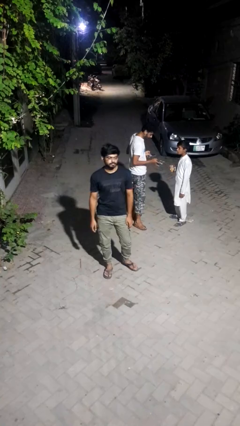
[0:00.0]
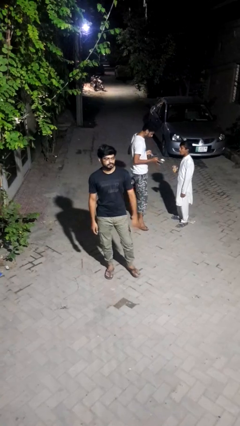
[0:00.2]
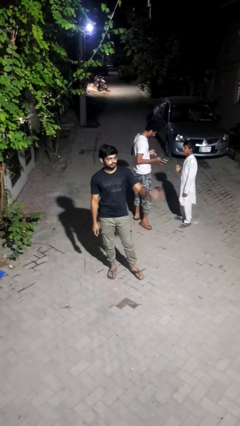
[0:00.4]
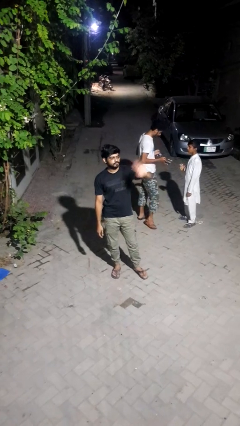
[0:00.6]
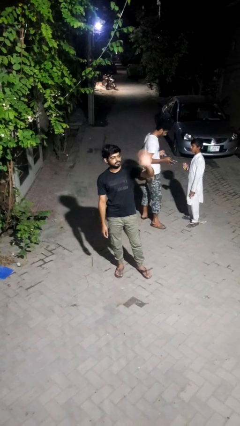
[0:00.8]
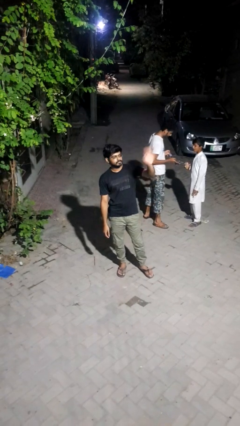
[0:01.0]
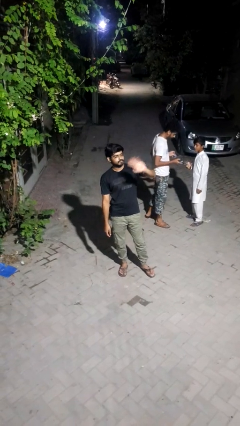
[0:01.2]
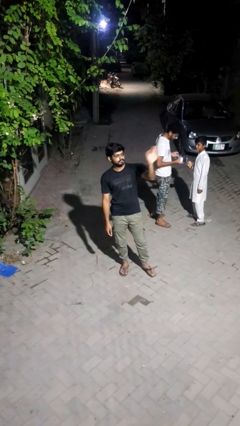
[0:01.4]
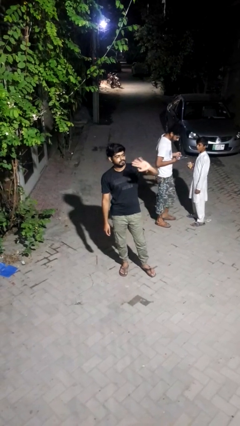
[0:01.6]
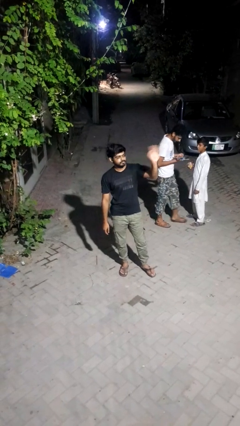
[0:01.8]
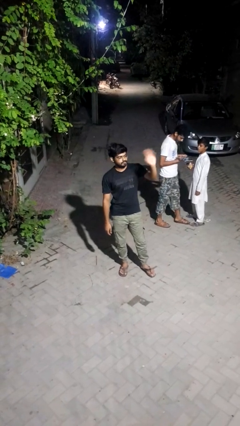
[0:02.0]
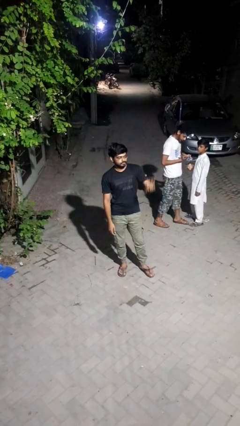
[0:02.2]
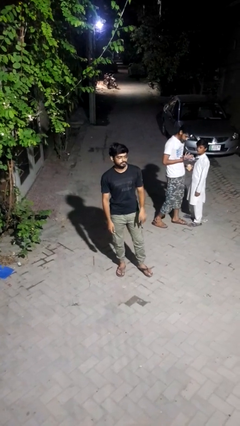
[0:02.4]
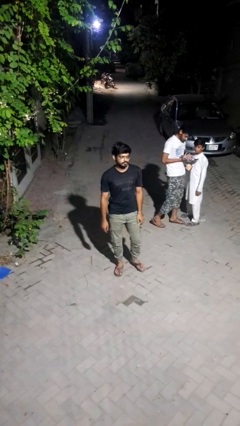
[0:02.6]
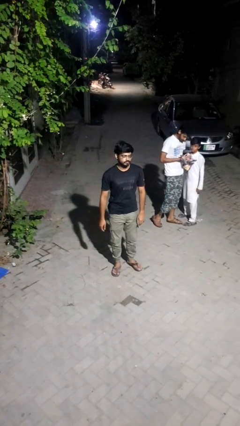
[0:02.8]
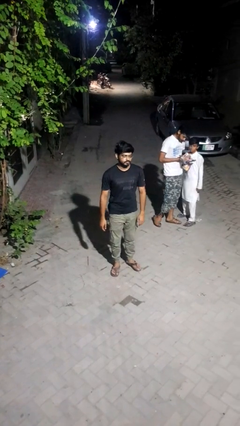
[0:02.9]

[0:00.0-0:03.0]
person waves at person

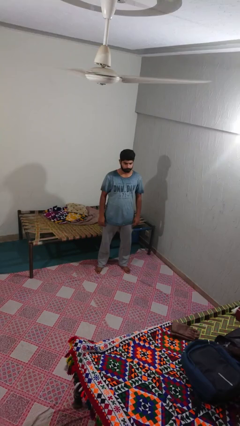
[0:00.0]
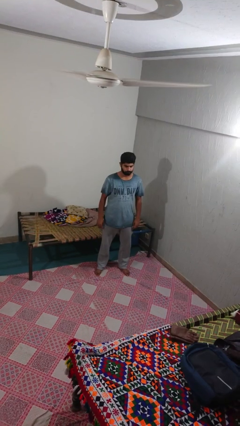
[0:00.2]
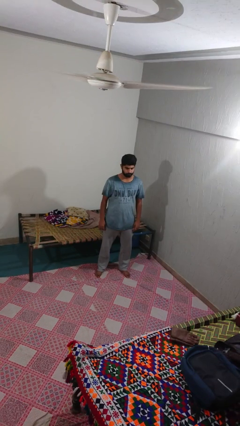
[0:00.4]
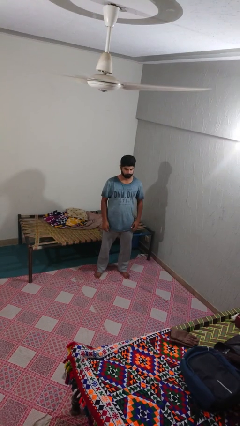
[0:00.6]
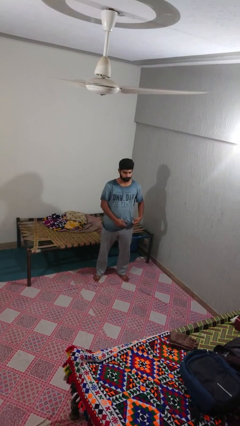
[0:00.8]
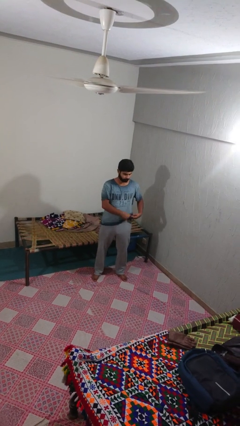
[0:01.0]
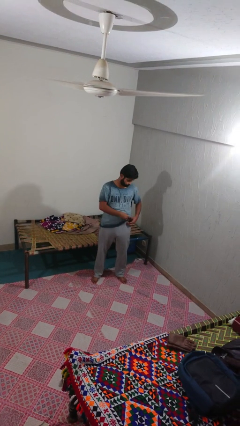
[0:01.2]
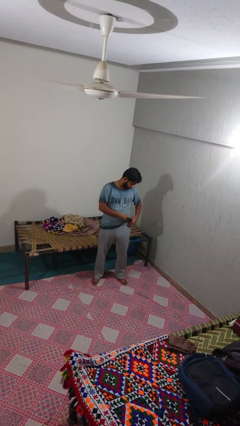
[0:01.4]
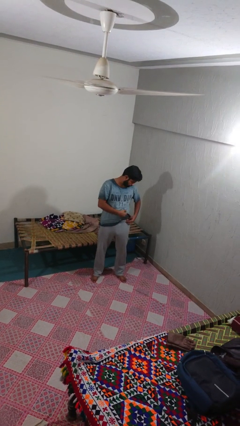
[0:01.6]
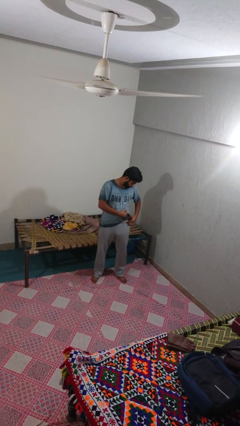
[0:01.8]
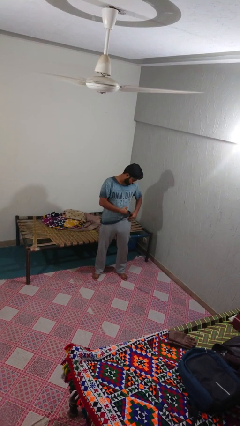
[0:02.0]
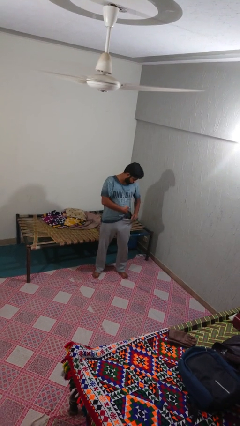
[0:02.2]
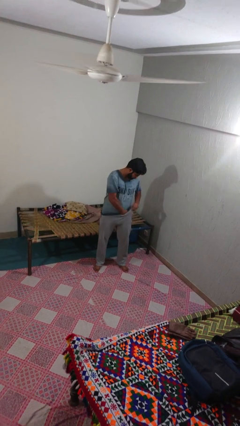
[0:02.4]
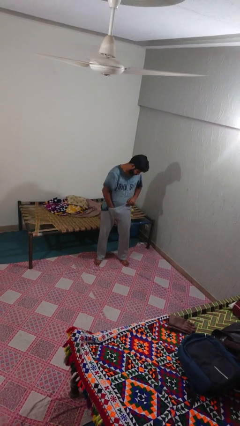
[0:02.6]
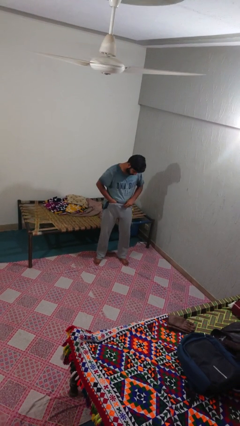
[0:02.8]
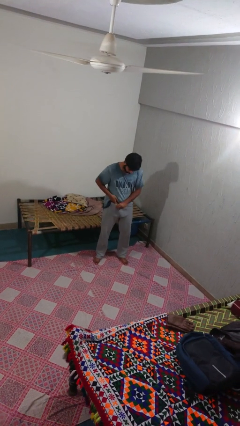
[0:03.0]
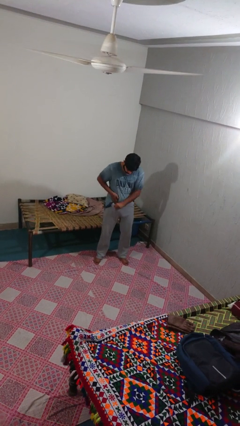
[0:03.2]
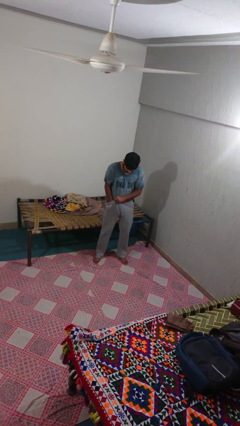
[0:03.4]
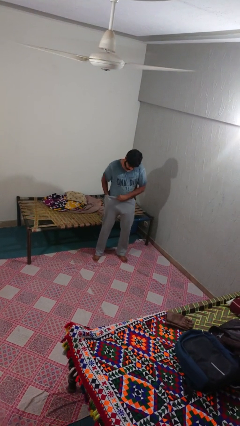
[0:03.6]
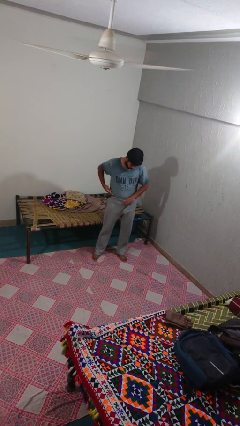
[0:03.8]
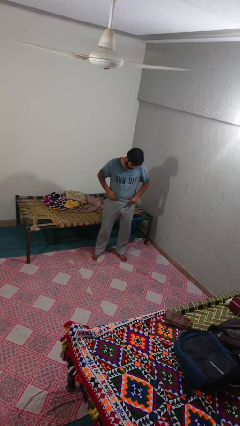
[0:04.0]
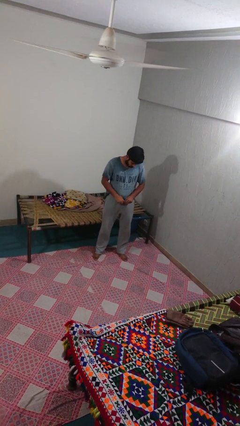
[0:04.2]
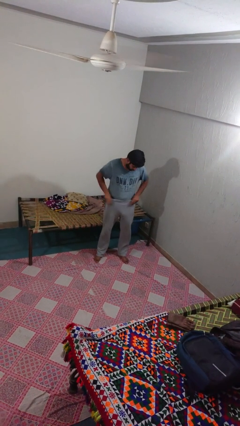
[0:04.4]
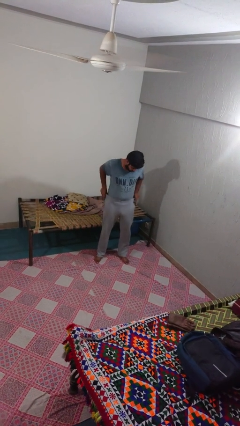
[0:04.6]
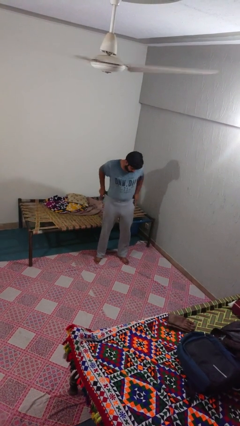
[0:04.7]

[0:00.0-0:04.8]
person tucks in shirt

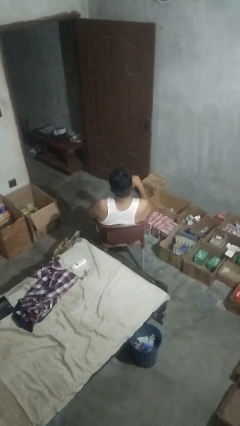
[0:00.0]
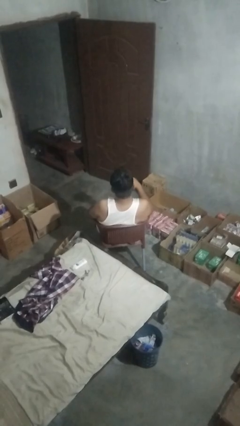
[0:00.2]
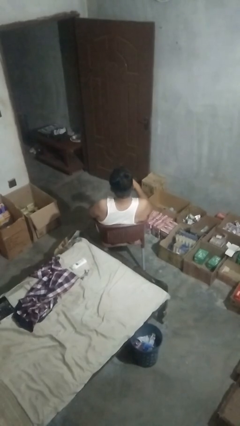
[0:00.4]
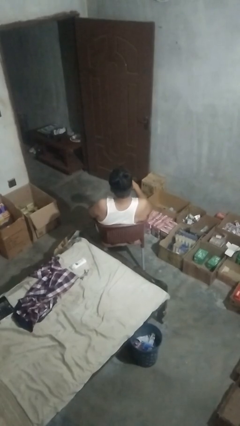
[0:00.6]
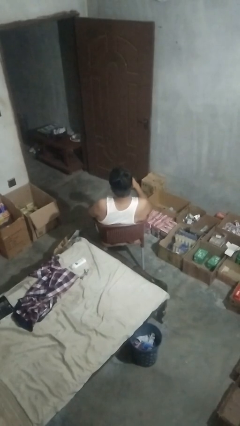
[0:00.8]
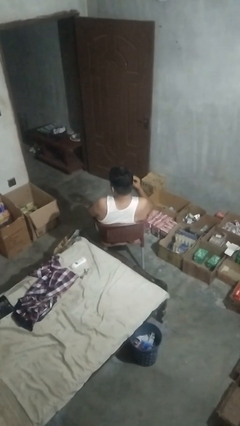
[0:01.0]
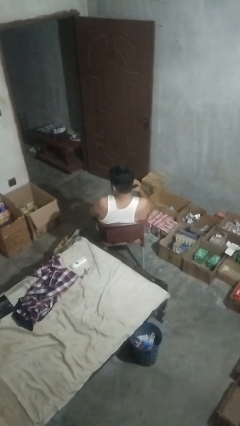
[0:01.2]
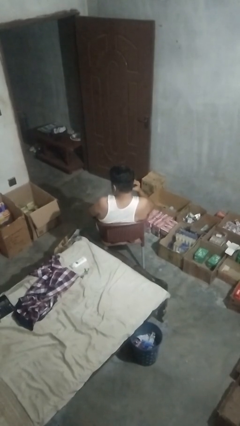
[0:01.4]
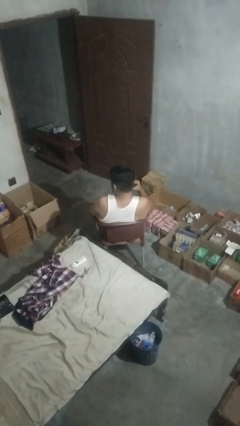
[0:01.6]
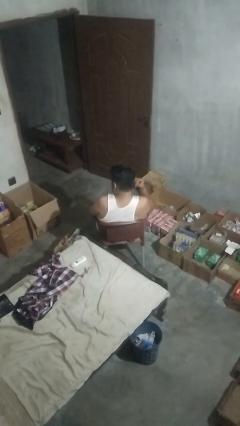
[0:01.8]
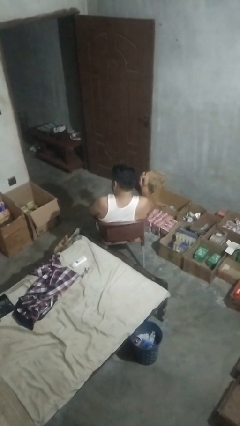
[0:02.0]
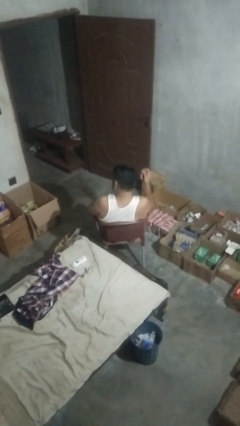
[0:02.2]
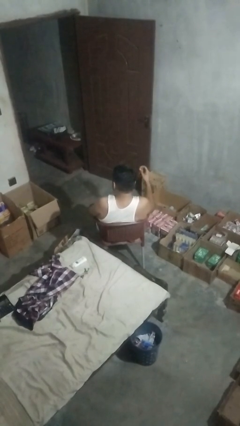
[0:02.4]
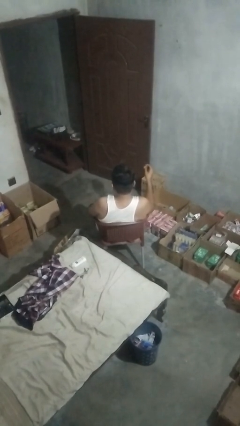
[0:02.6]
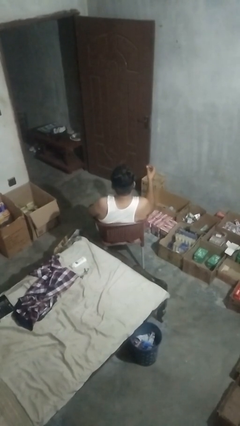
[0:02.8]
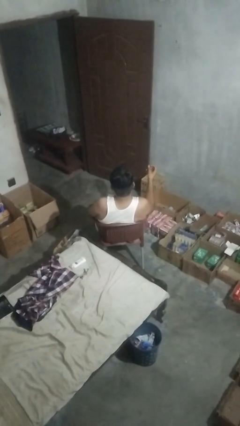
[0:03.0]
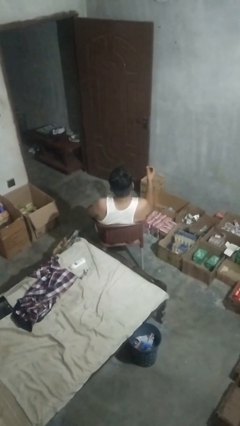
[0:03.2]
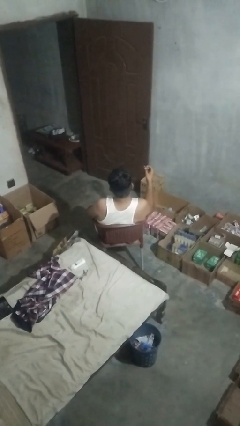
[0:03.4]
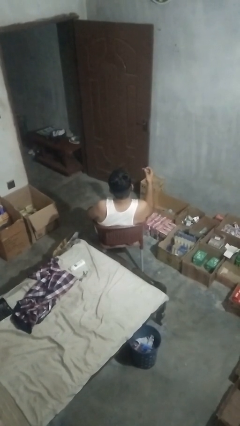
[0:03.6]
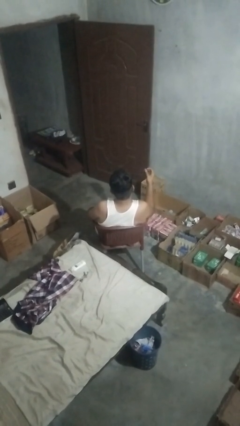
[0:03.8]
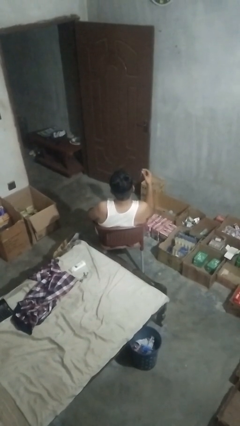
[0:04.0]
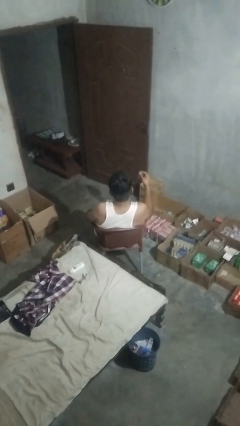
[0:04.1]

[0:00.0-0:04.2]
person takes off earrings

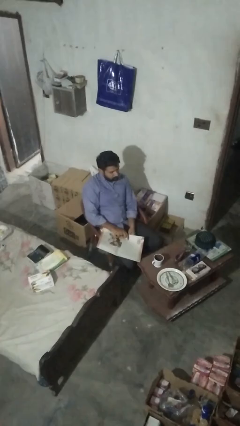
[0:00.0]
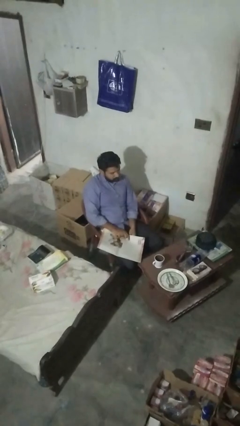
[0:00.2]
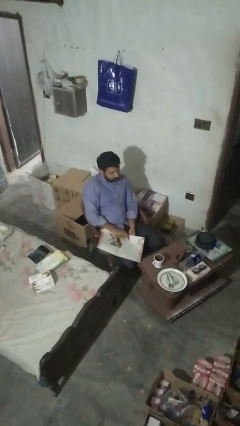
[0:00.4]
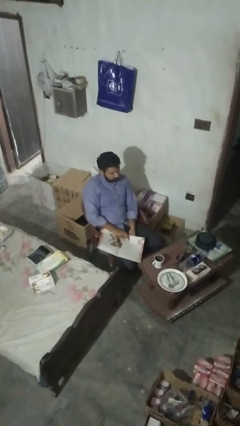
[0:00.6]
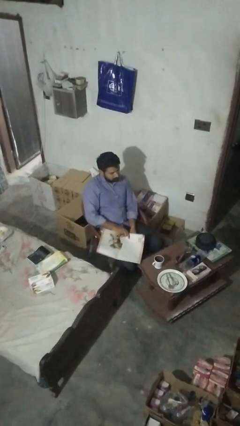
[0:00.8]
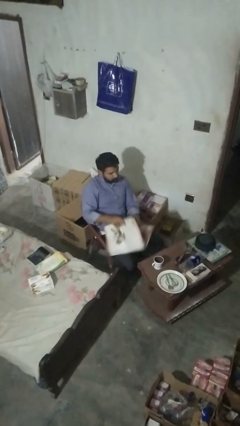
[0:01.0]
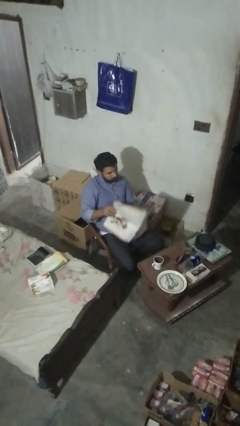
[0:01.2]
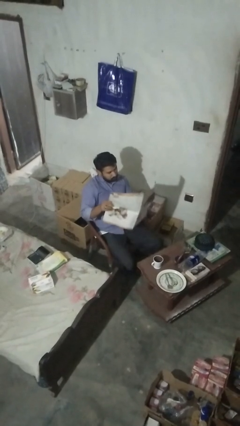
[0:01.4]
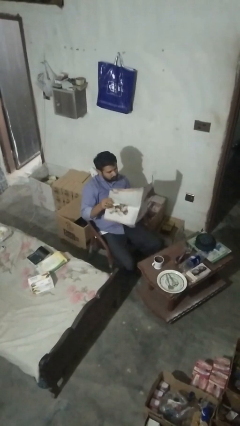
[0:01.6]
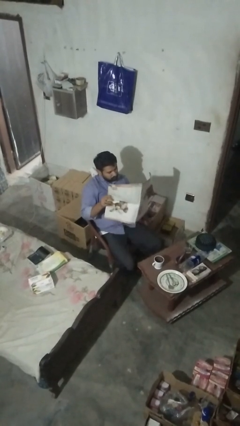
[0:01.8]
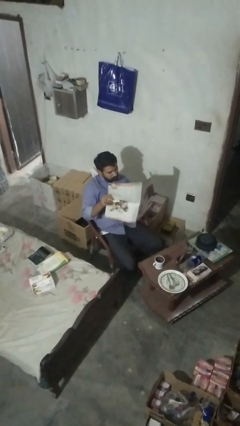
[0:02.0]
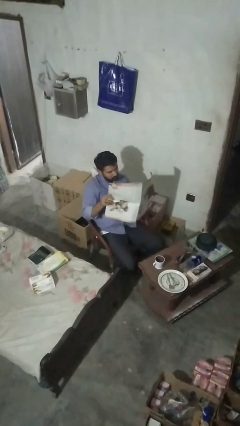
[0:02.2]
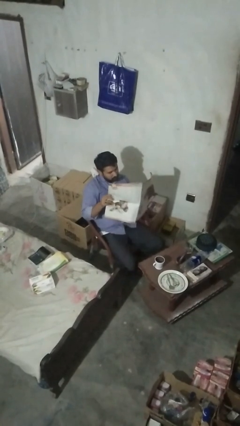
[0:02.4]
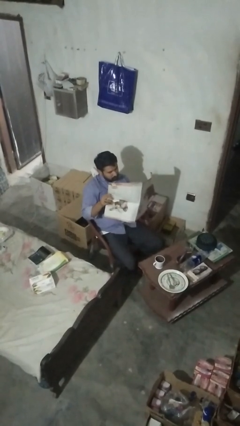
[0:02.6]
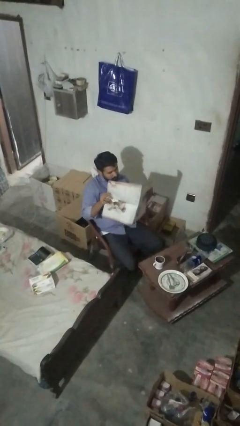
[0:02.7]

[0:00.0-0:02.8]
person reads newspaper

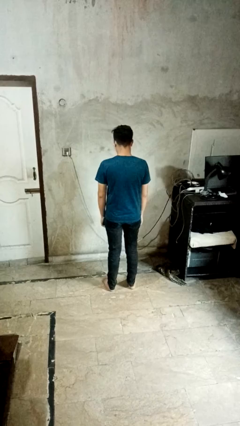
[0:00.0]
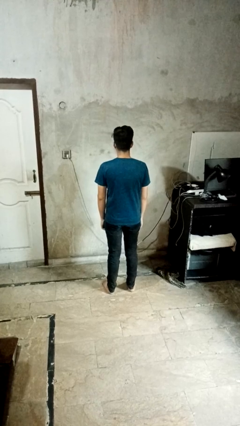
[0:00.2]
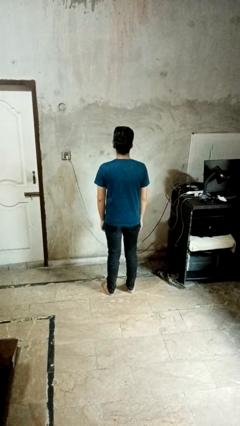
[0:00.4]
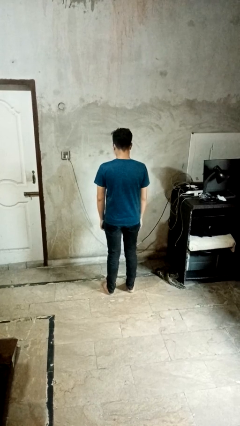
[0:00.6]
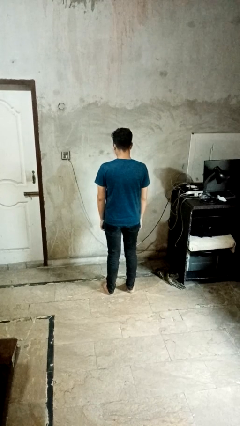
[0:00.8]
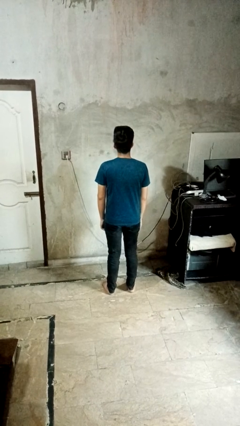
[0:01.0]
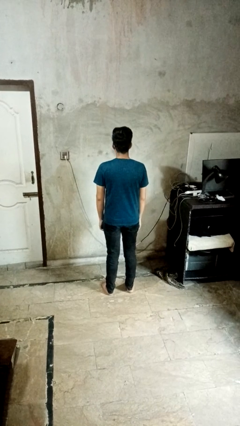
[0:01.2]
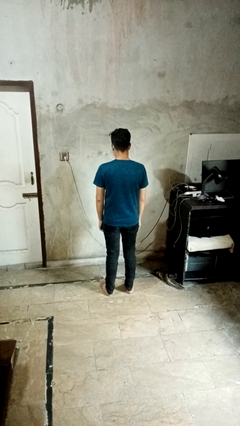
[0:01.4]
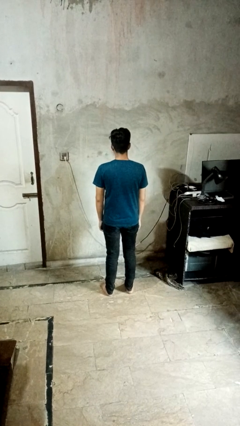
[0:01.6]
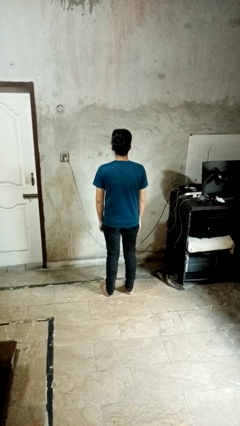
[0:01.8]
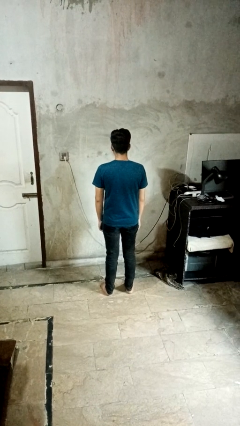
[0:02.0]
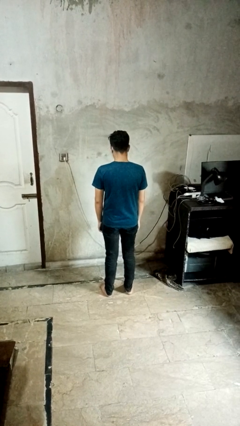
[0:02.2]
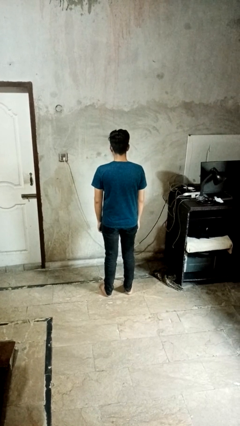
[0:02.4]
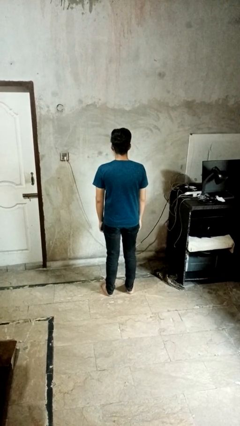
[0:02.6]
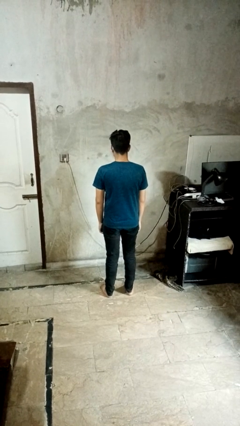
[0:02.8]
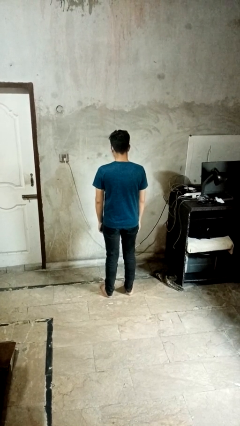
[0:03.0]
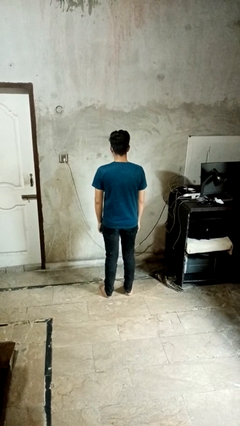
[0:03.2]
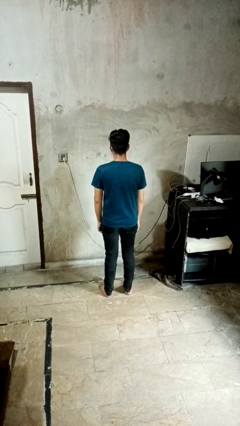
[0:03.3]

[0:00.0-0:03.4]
person nods head
